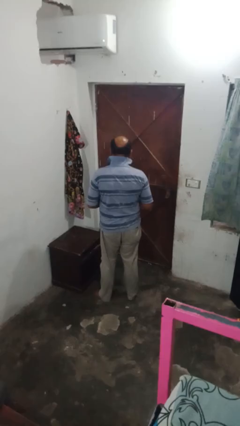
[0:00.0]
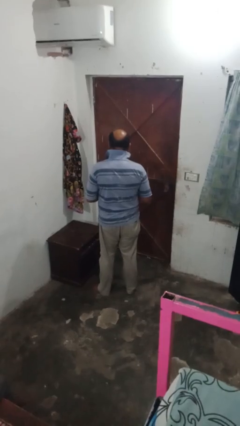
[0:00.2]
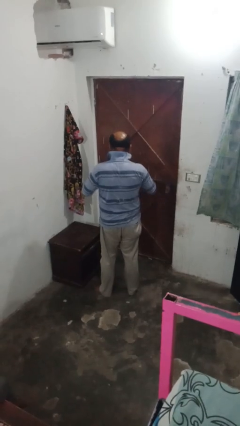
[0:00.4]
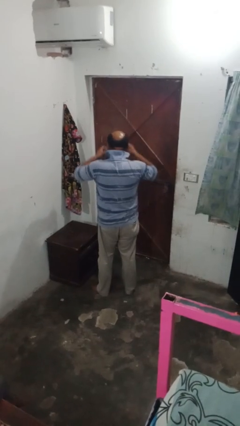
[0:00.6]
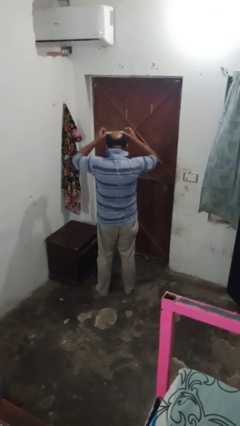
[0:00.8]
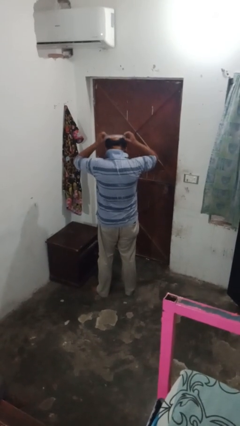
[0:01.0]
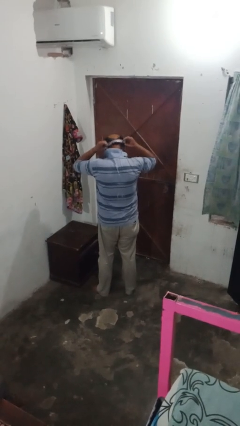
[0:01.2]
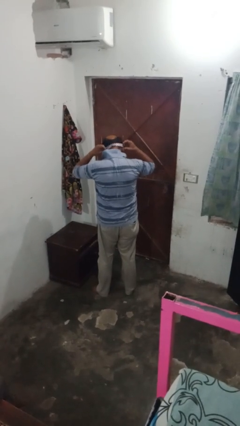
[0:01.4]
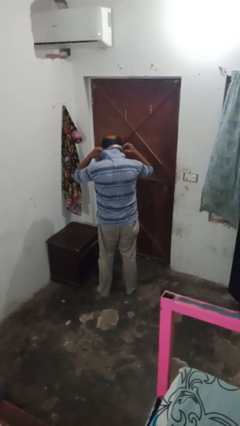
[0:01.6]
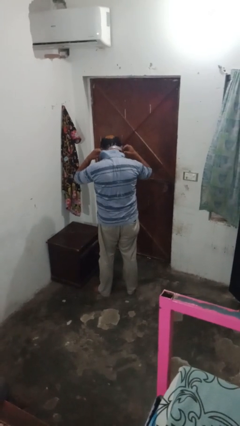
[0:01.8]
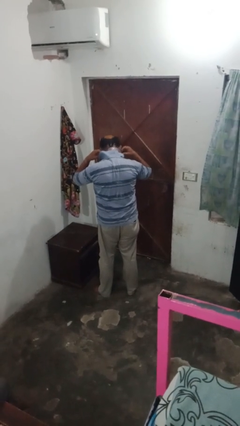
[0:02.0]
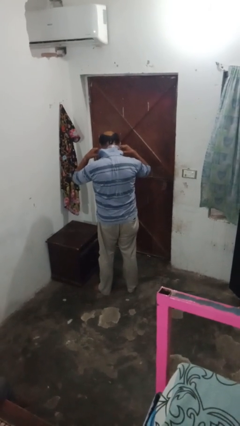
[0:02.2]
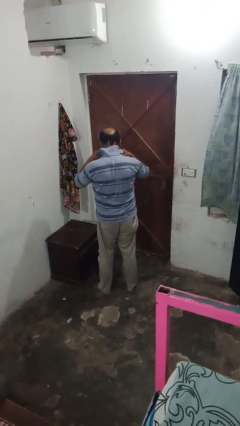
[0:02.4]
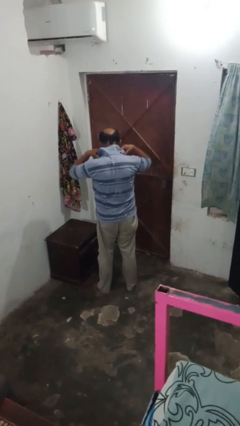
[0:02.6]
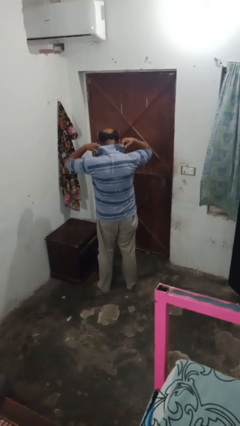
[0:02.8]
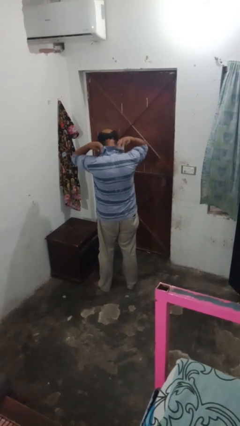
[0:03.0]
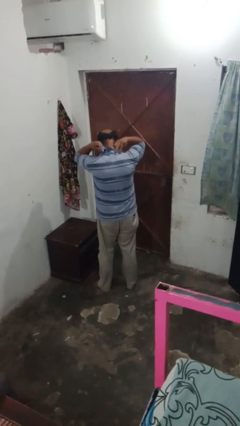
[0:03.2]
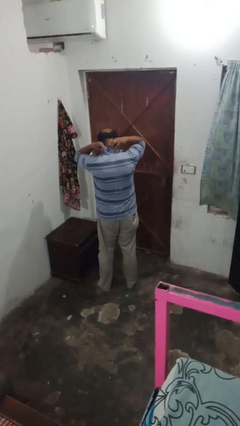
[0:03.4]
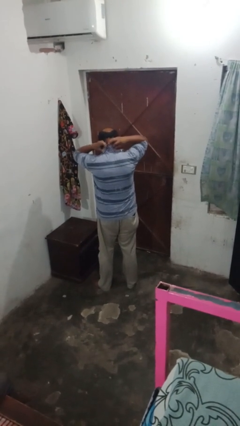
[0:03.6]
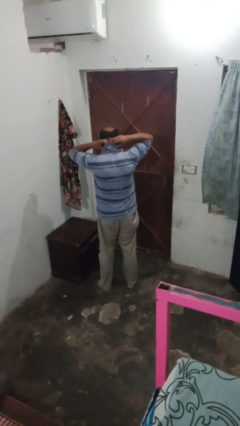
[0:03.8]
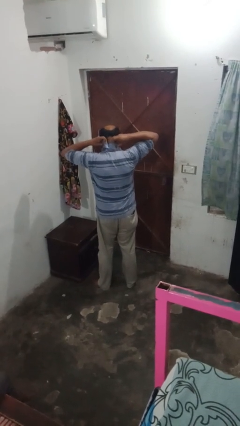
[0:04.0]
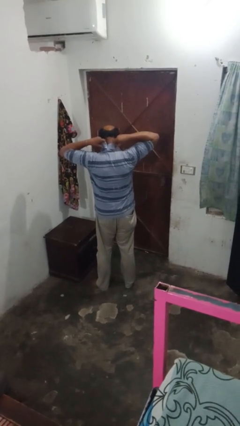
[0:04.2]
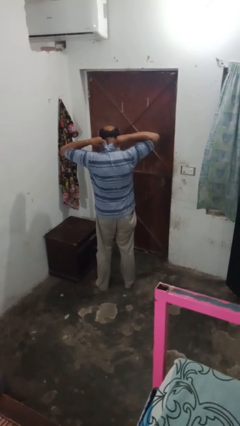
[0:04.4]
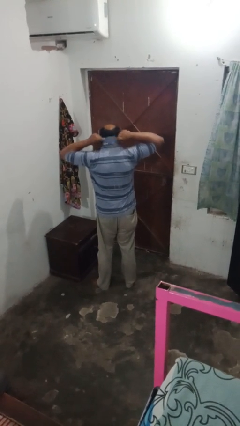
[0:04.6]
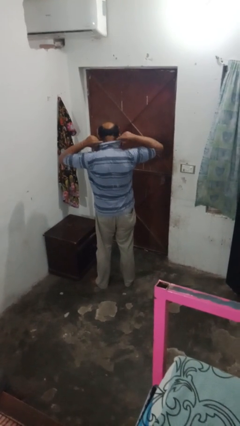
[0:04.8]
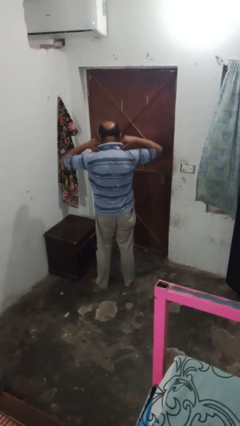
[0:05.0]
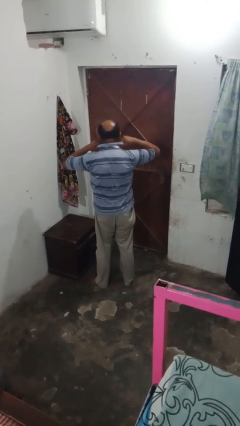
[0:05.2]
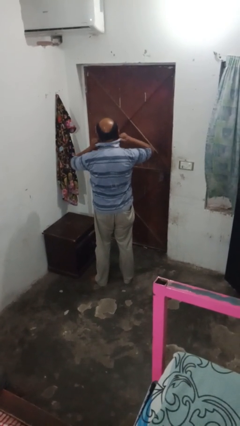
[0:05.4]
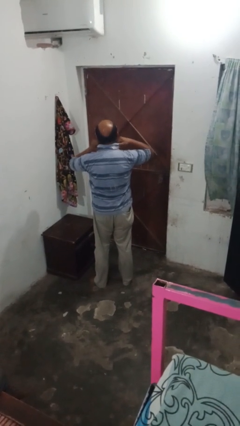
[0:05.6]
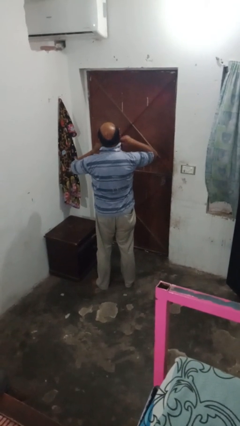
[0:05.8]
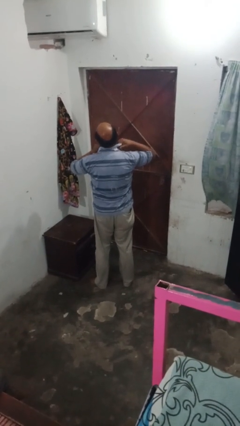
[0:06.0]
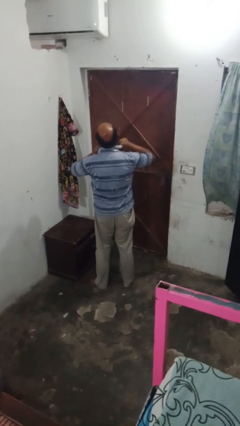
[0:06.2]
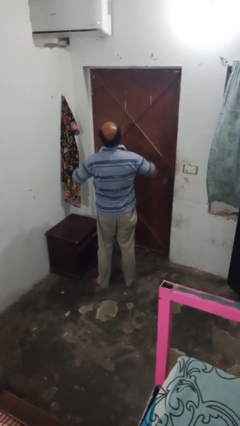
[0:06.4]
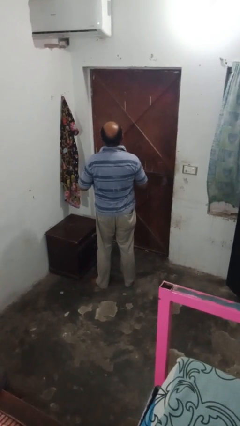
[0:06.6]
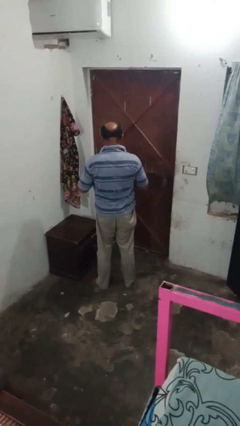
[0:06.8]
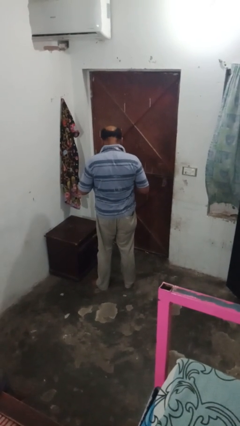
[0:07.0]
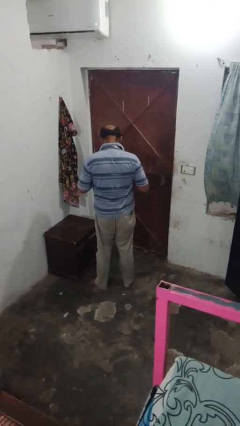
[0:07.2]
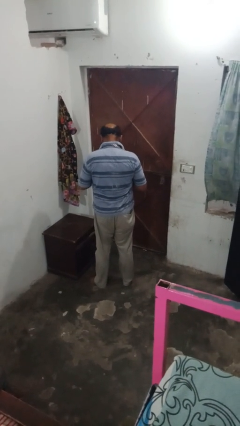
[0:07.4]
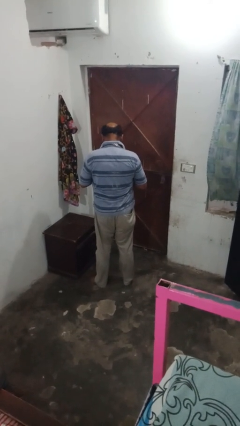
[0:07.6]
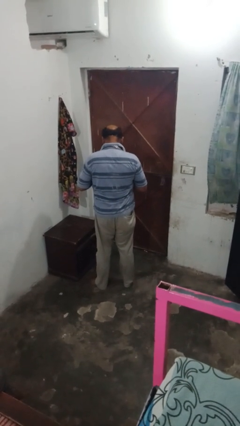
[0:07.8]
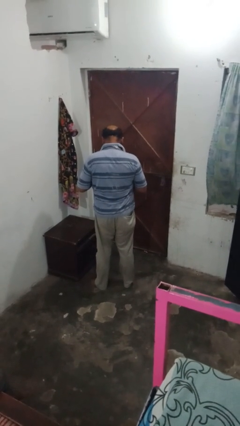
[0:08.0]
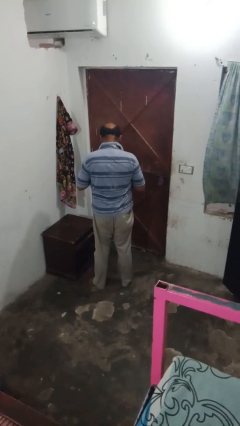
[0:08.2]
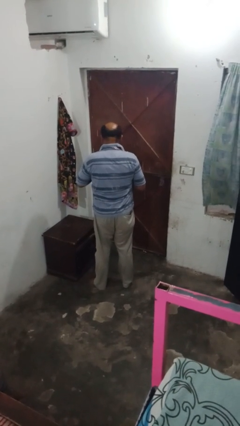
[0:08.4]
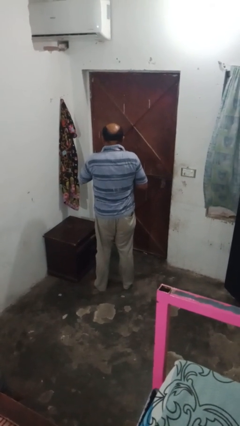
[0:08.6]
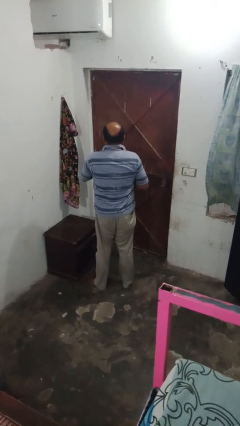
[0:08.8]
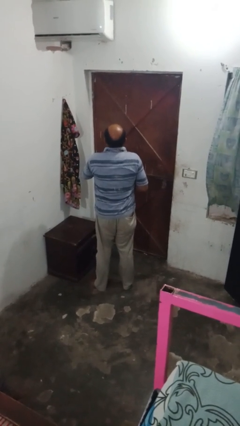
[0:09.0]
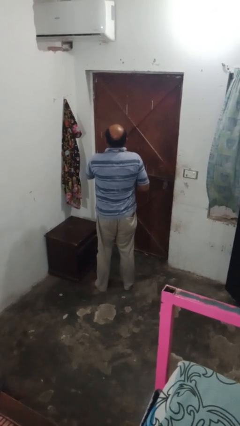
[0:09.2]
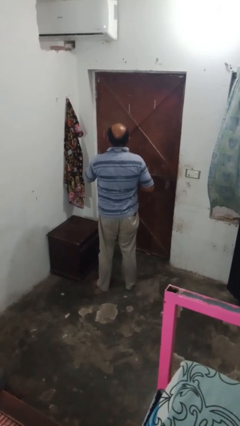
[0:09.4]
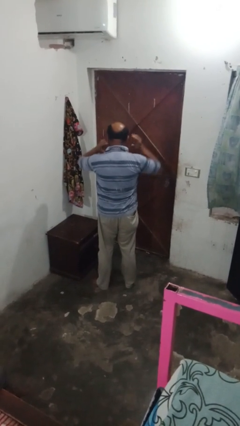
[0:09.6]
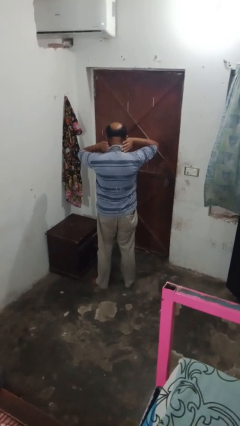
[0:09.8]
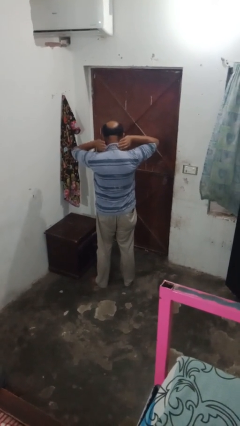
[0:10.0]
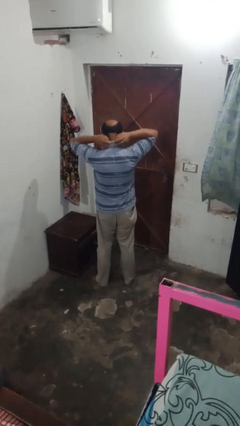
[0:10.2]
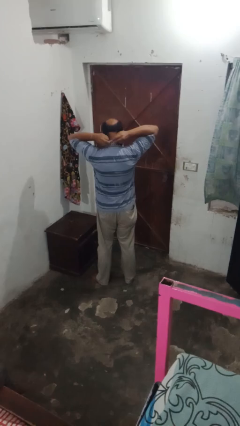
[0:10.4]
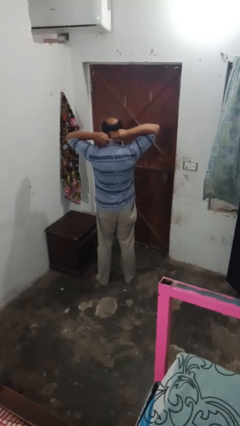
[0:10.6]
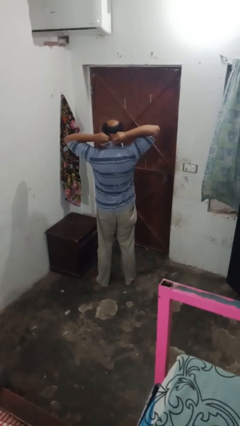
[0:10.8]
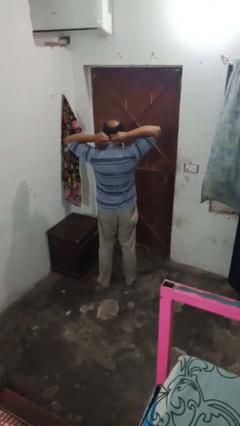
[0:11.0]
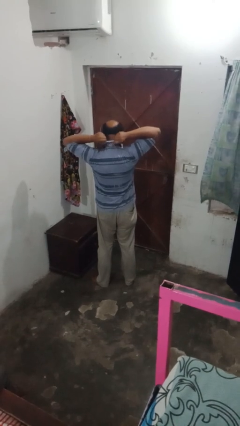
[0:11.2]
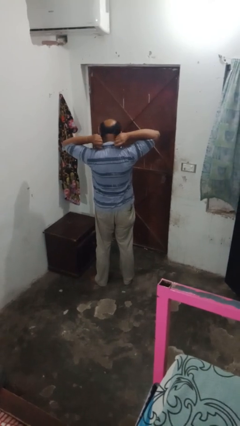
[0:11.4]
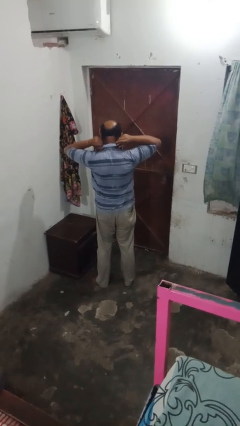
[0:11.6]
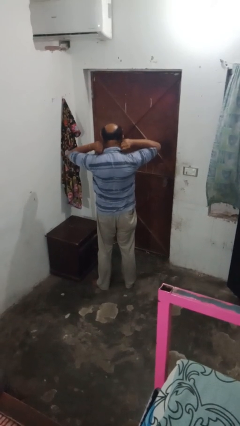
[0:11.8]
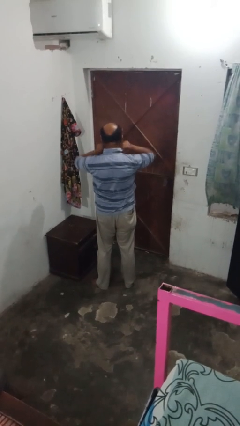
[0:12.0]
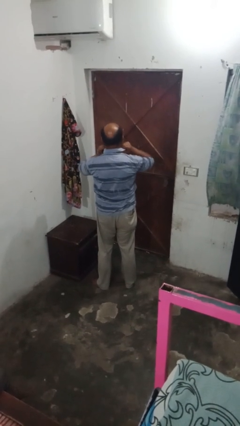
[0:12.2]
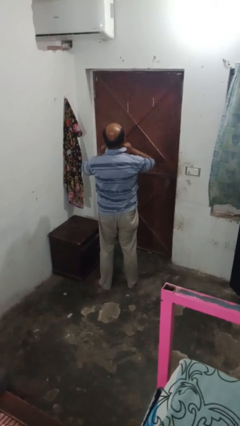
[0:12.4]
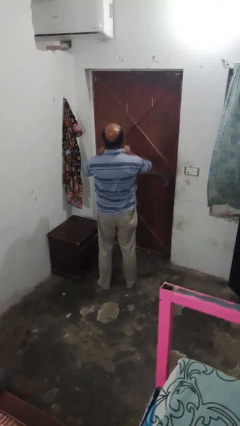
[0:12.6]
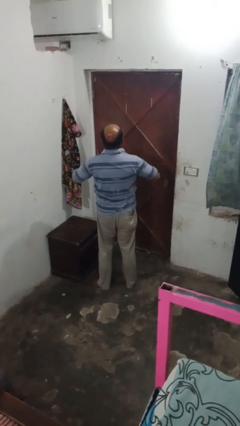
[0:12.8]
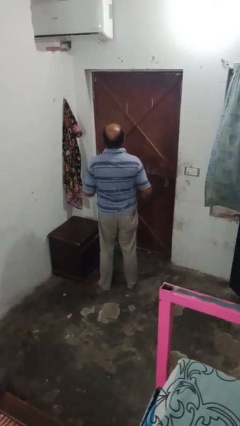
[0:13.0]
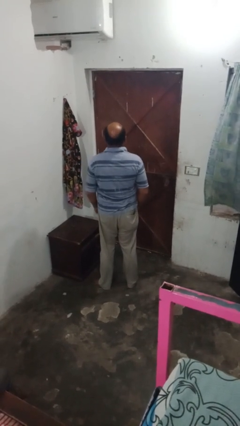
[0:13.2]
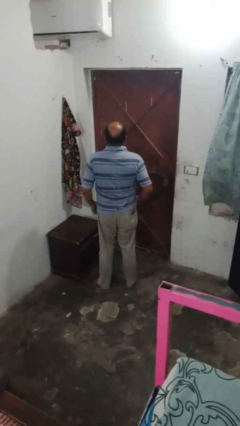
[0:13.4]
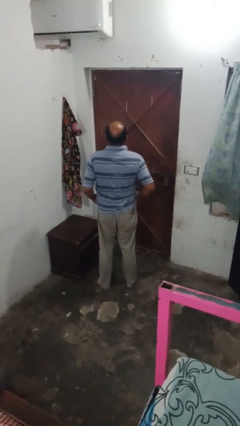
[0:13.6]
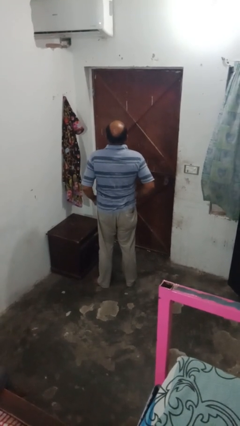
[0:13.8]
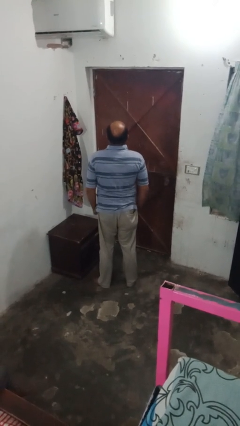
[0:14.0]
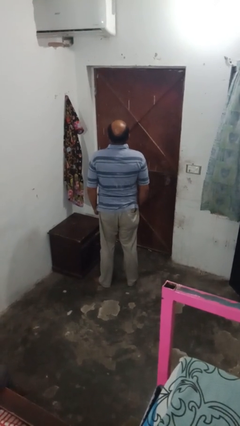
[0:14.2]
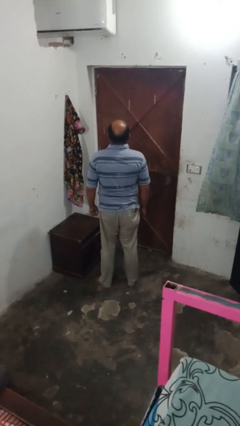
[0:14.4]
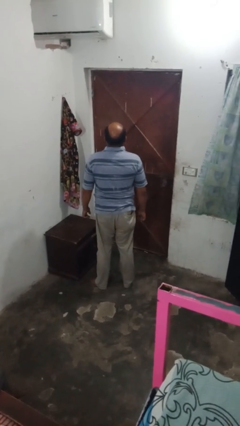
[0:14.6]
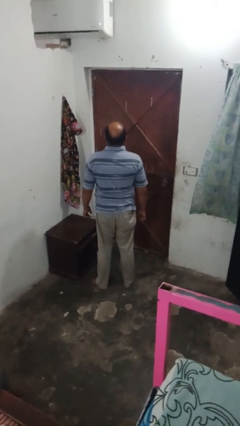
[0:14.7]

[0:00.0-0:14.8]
person puts on necktie

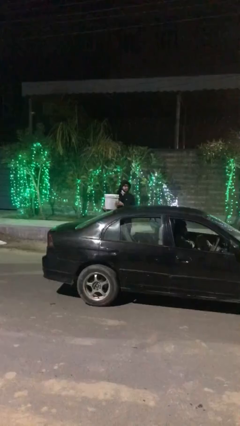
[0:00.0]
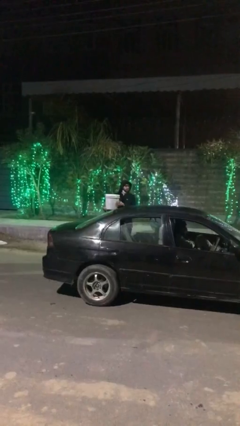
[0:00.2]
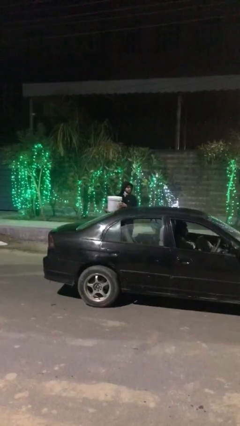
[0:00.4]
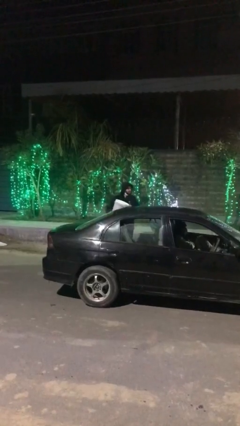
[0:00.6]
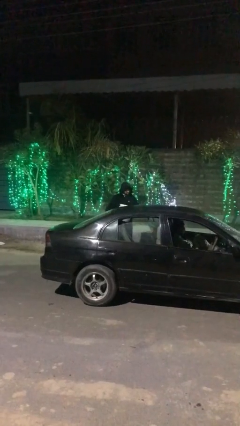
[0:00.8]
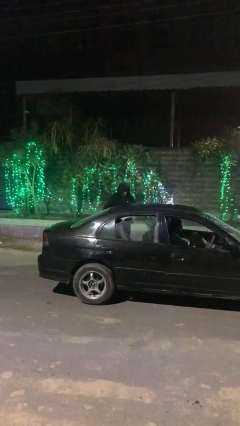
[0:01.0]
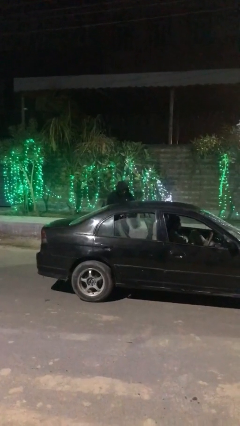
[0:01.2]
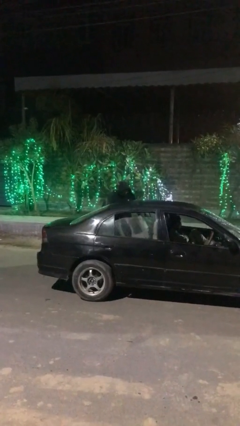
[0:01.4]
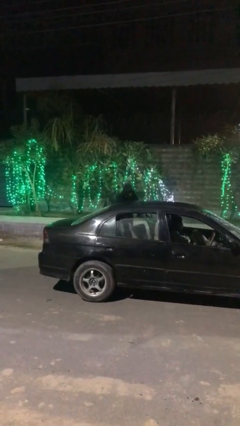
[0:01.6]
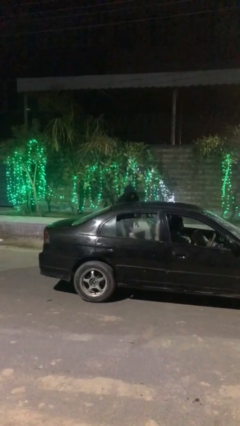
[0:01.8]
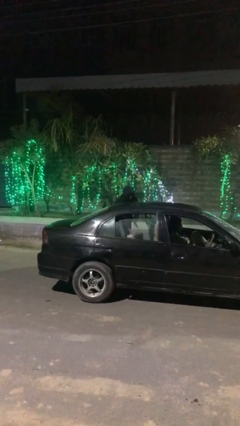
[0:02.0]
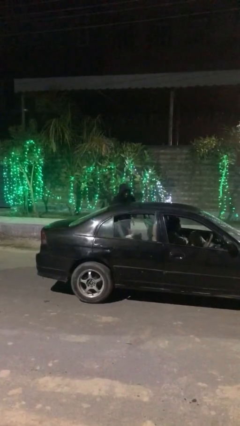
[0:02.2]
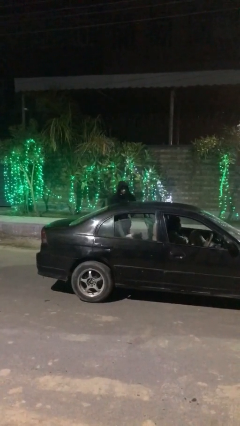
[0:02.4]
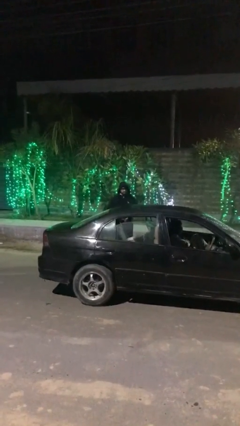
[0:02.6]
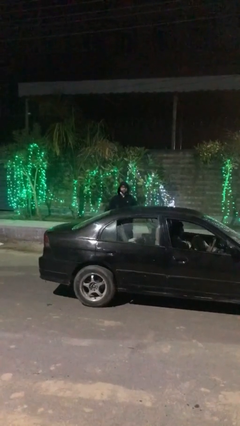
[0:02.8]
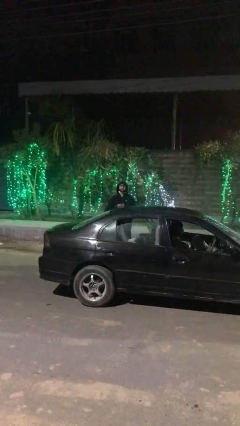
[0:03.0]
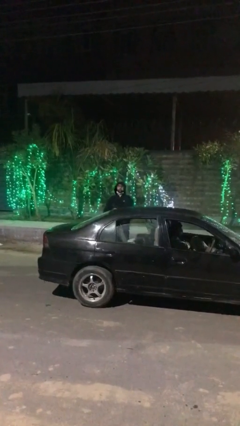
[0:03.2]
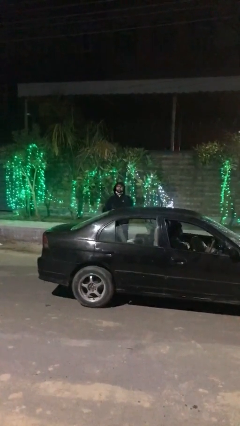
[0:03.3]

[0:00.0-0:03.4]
person loads car
